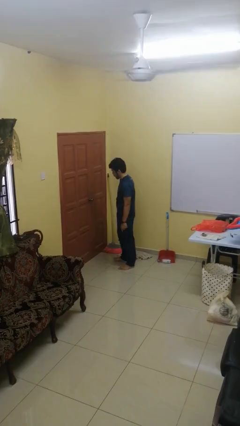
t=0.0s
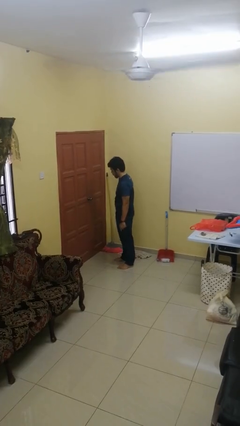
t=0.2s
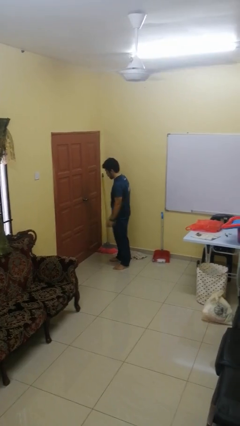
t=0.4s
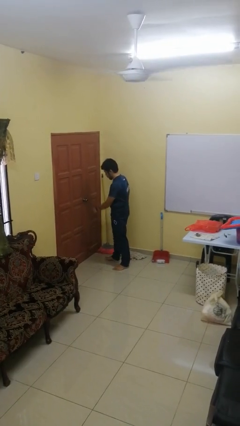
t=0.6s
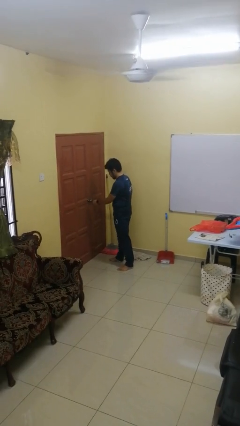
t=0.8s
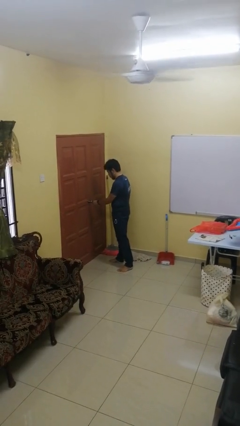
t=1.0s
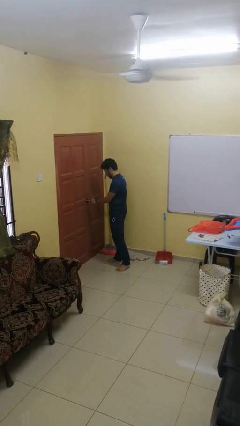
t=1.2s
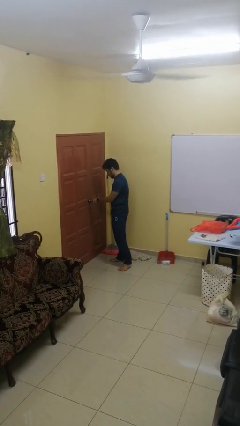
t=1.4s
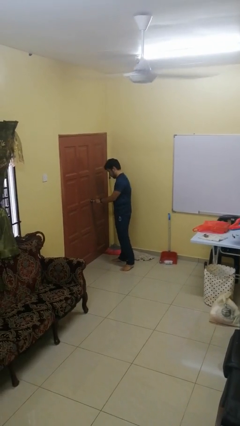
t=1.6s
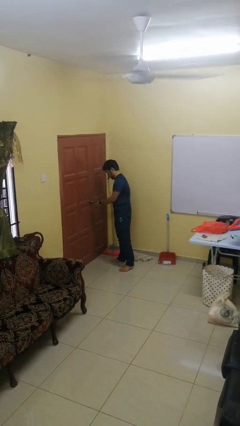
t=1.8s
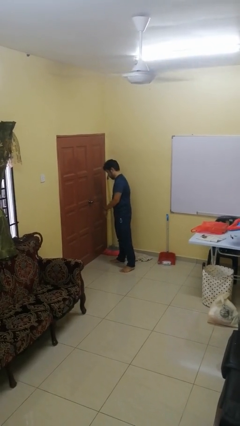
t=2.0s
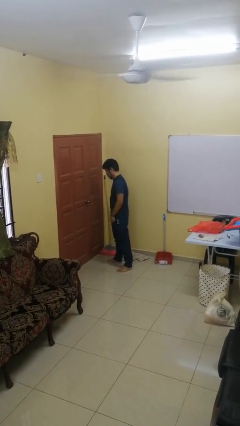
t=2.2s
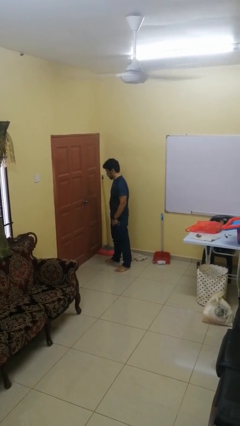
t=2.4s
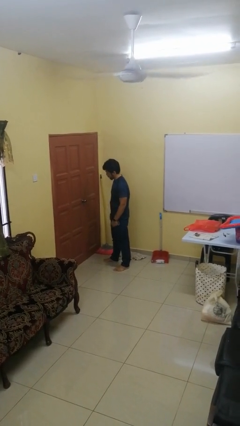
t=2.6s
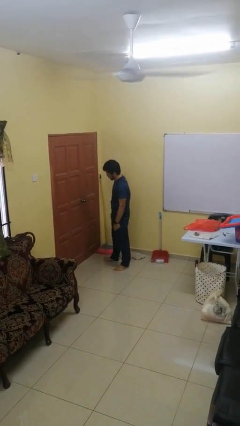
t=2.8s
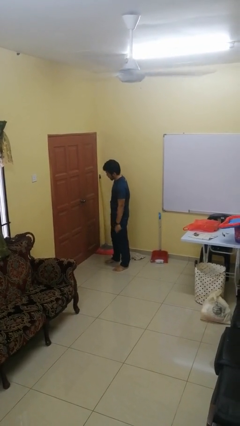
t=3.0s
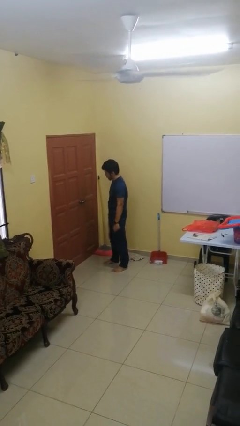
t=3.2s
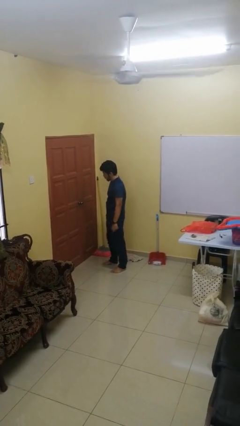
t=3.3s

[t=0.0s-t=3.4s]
person locks door with keys

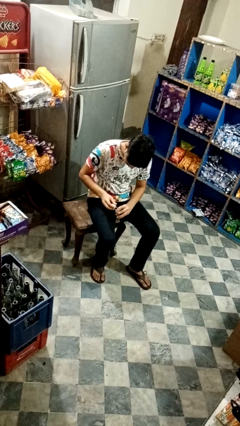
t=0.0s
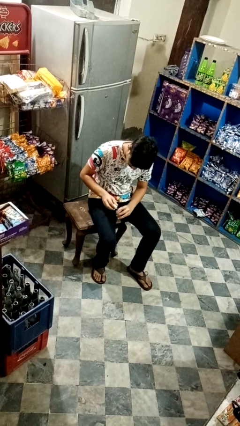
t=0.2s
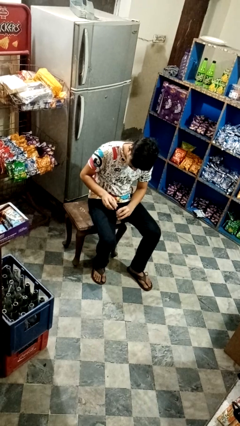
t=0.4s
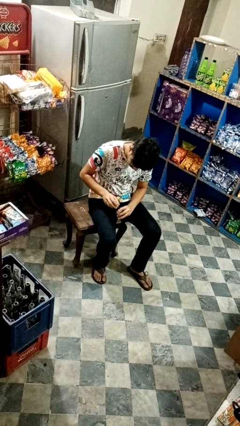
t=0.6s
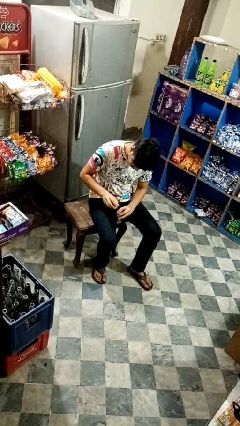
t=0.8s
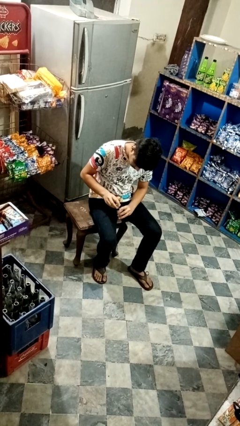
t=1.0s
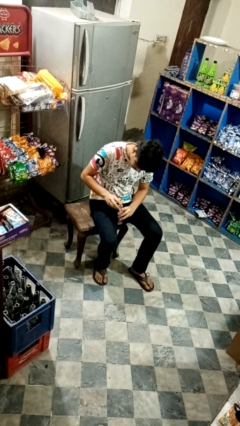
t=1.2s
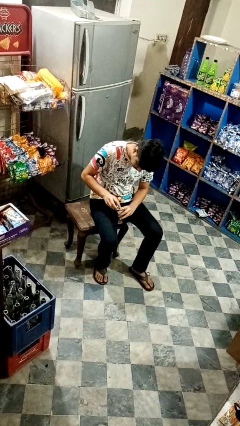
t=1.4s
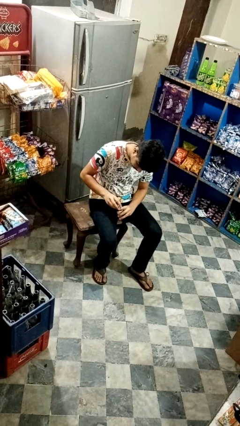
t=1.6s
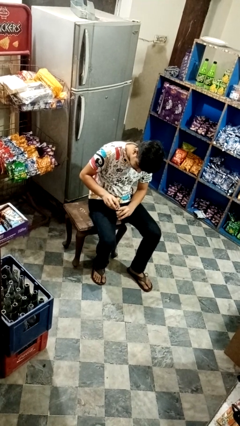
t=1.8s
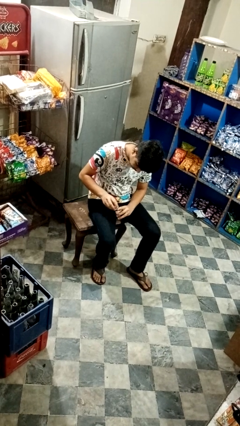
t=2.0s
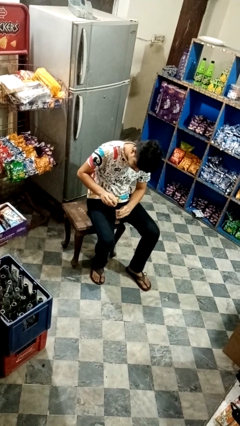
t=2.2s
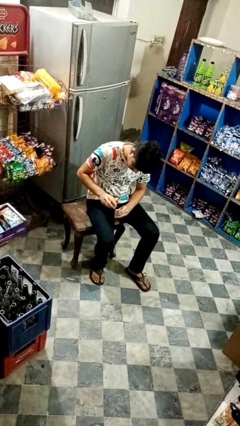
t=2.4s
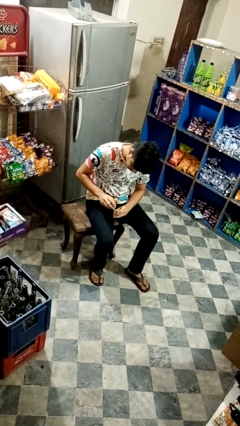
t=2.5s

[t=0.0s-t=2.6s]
person paints fingernails

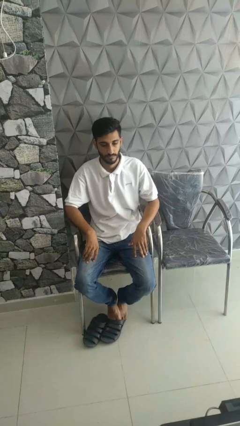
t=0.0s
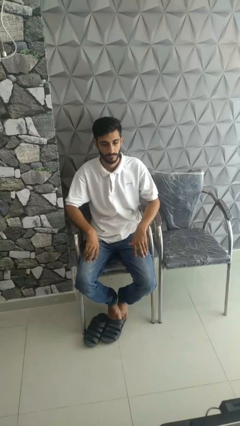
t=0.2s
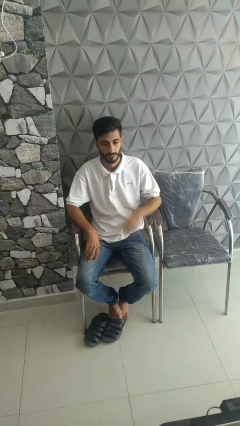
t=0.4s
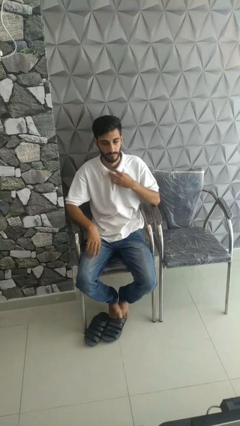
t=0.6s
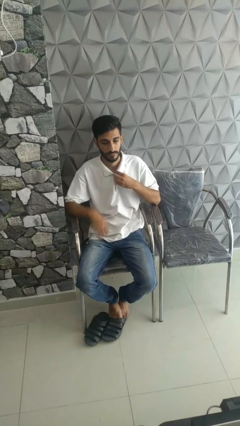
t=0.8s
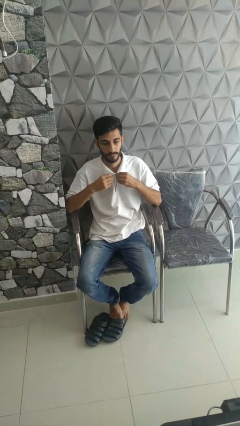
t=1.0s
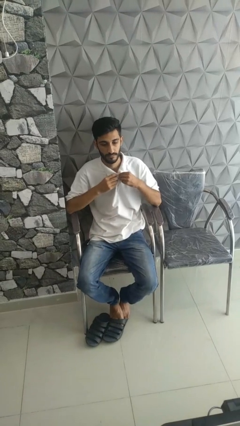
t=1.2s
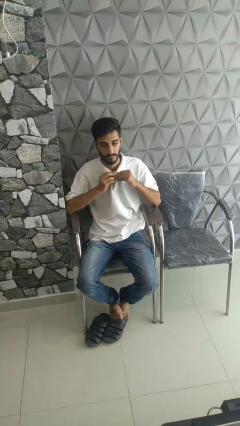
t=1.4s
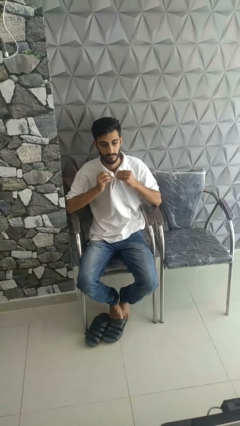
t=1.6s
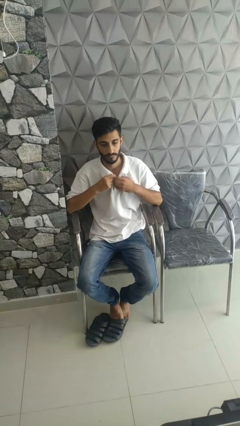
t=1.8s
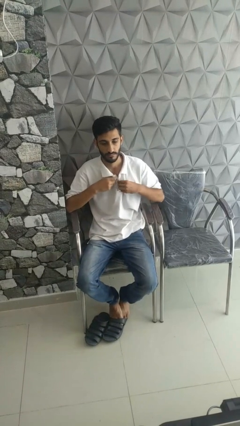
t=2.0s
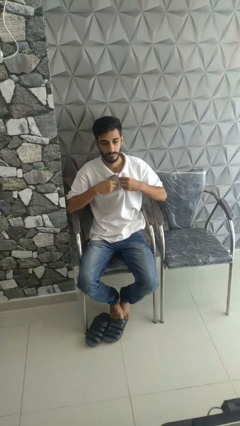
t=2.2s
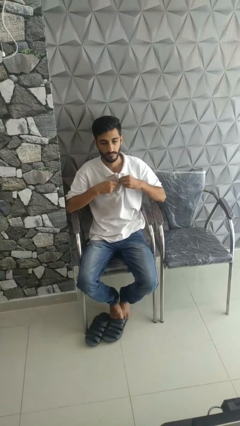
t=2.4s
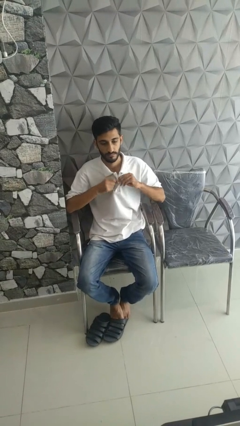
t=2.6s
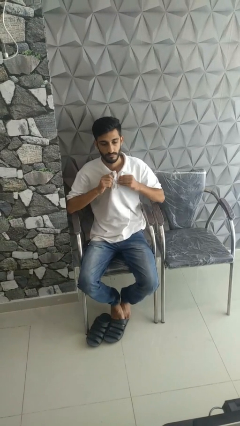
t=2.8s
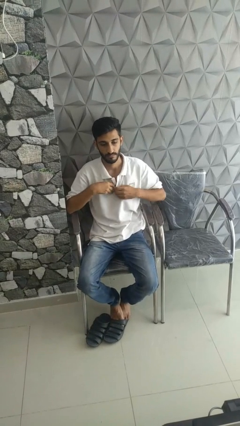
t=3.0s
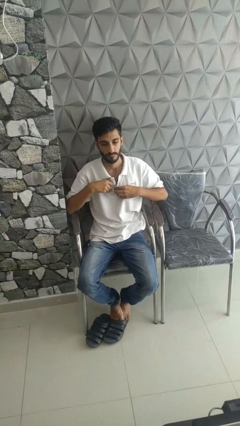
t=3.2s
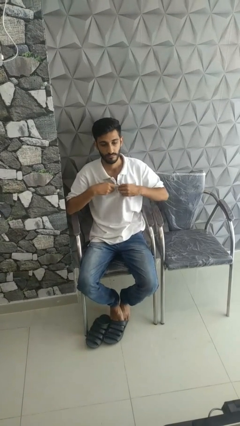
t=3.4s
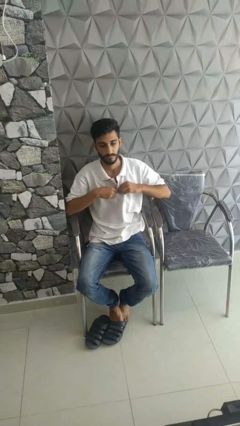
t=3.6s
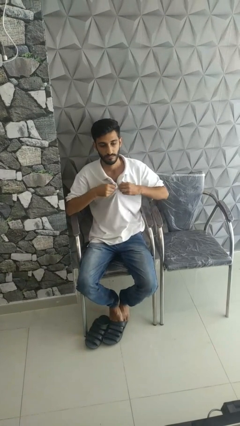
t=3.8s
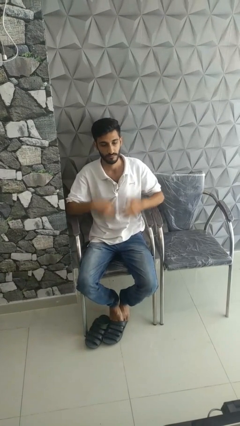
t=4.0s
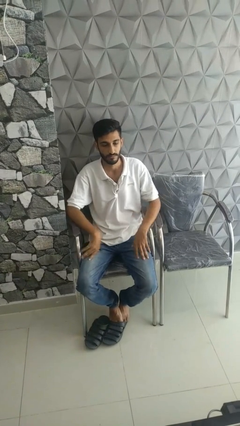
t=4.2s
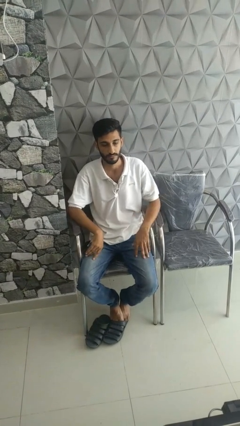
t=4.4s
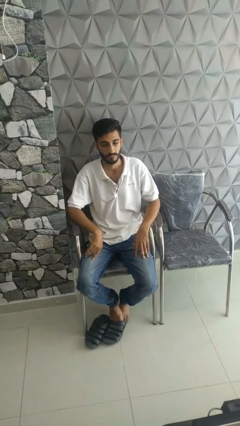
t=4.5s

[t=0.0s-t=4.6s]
person unbuttons shirt

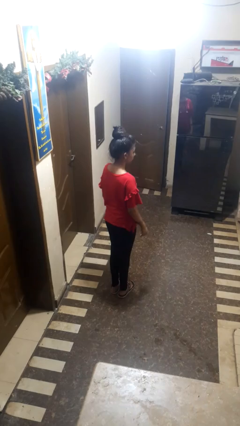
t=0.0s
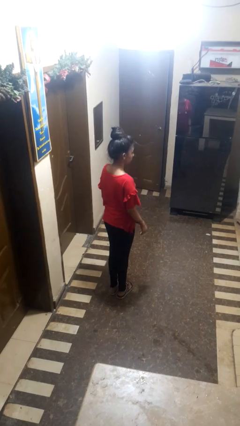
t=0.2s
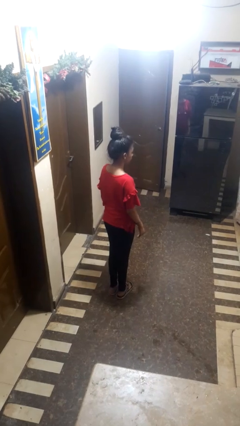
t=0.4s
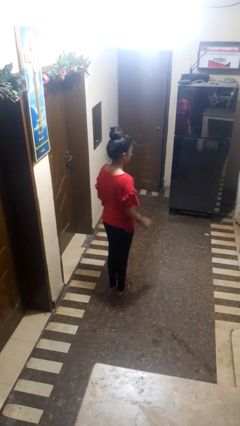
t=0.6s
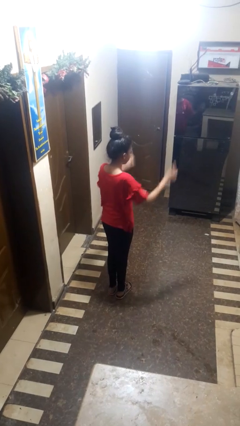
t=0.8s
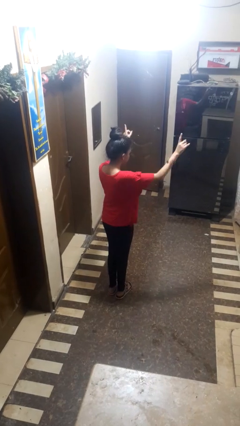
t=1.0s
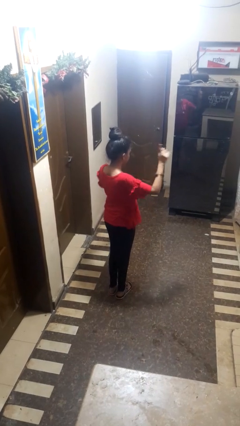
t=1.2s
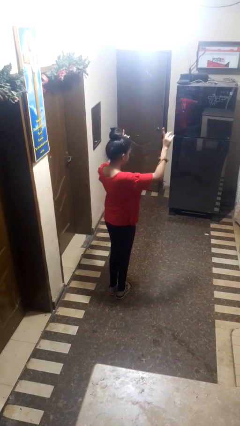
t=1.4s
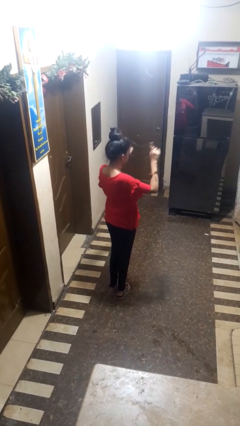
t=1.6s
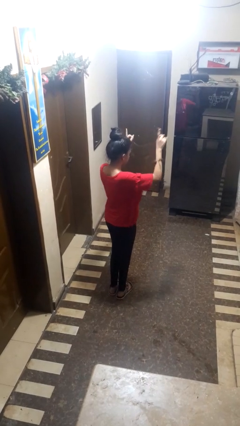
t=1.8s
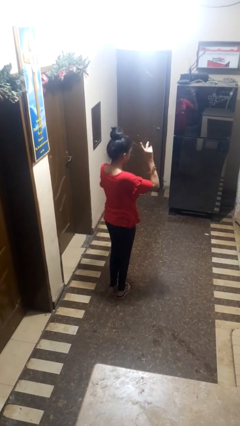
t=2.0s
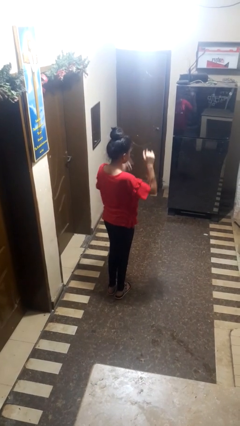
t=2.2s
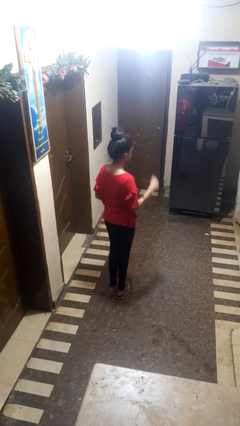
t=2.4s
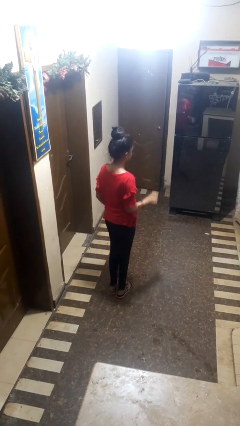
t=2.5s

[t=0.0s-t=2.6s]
person dances in place

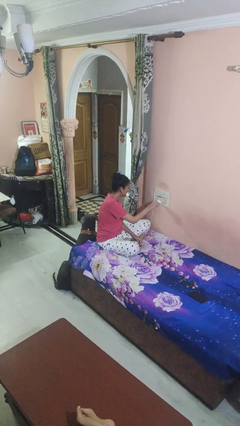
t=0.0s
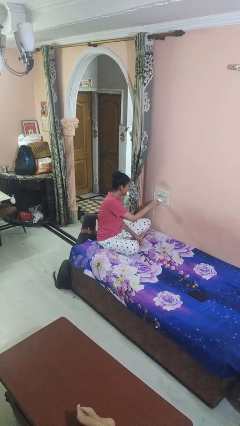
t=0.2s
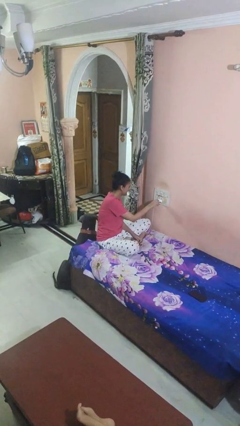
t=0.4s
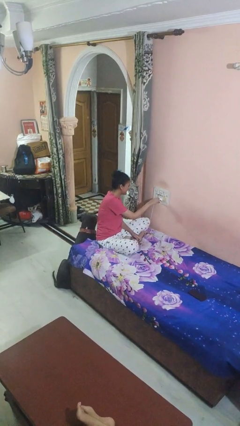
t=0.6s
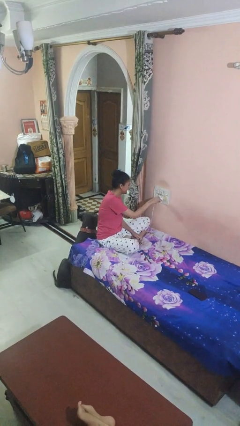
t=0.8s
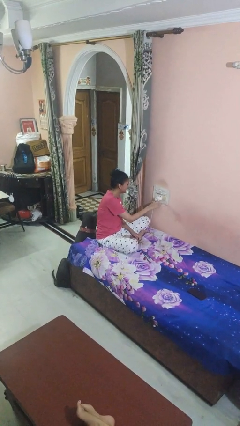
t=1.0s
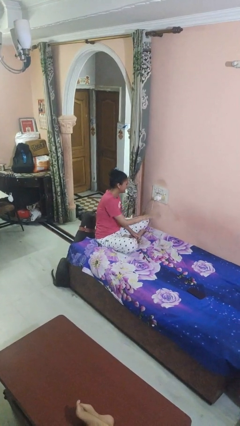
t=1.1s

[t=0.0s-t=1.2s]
person plugs into electrical socket

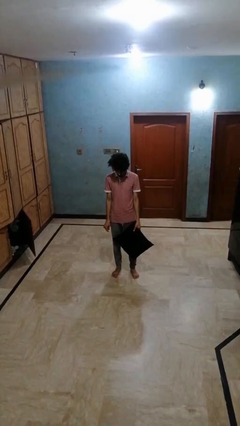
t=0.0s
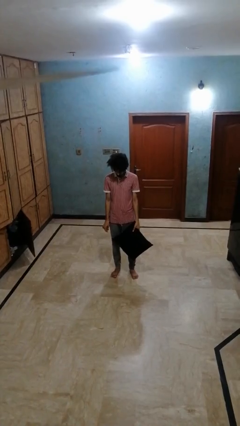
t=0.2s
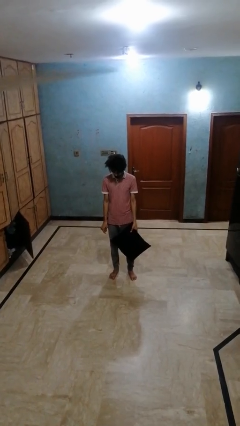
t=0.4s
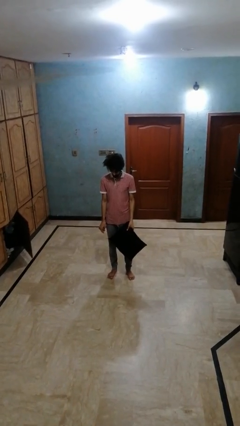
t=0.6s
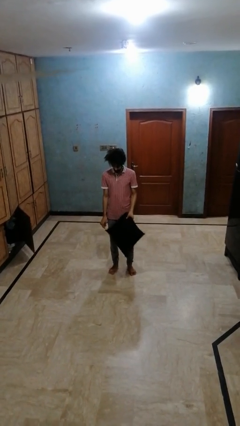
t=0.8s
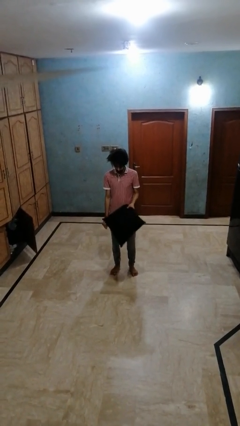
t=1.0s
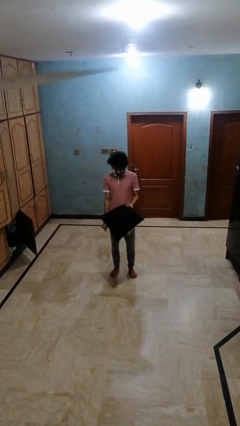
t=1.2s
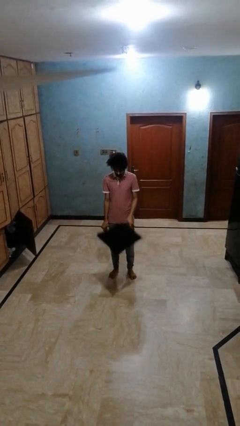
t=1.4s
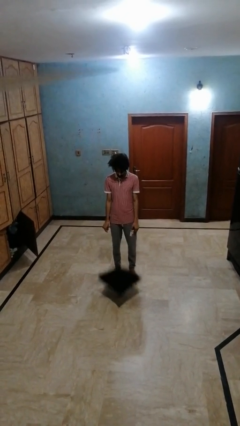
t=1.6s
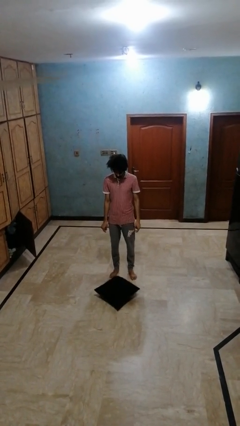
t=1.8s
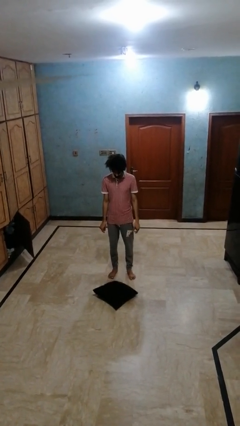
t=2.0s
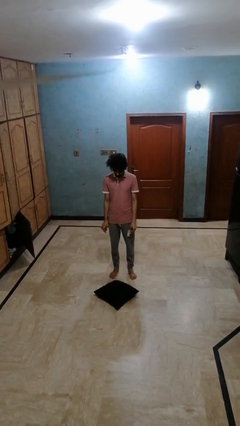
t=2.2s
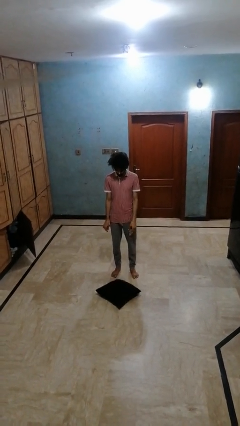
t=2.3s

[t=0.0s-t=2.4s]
person throws object to ground

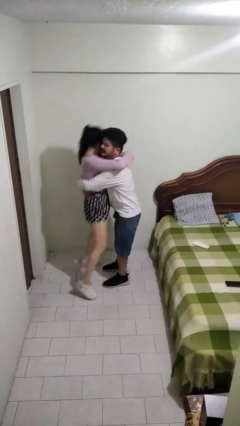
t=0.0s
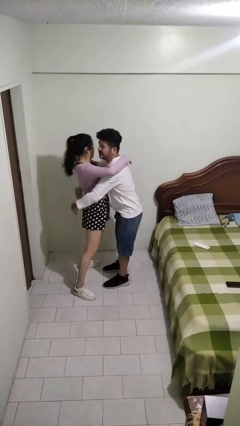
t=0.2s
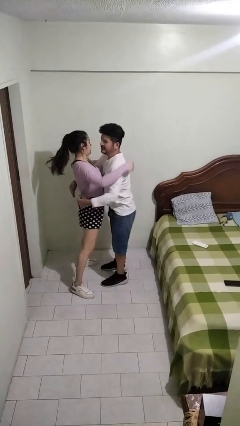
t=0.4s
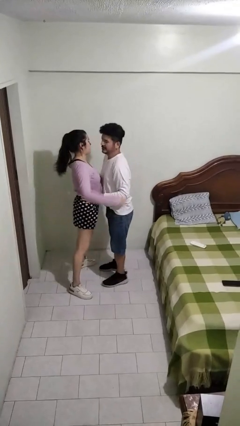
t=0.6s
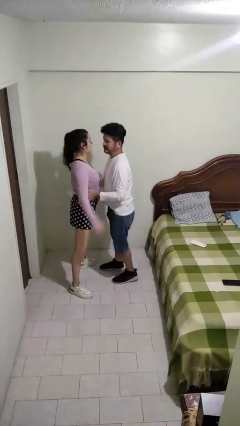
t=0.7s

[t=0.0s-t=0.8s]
person puts down person
